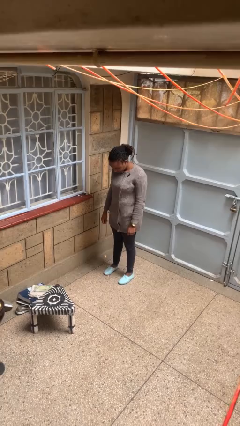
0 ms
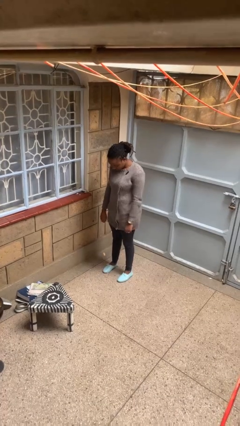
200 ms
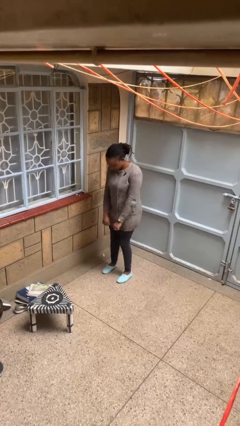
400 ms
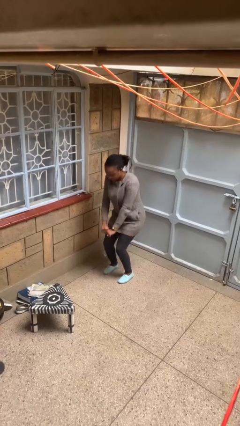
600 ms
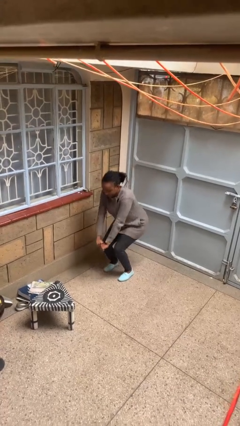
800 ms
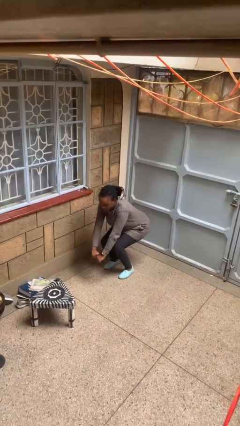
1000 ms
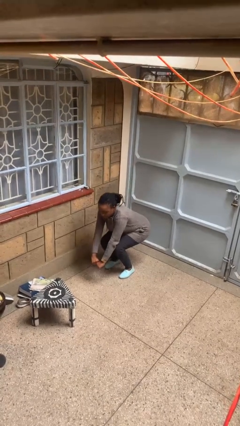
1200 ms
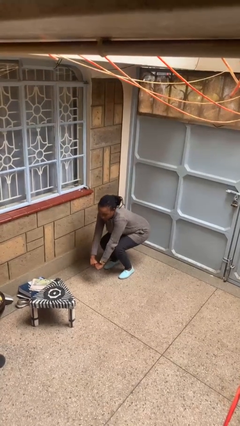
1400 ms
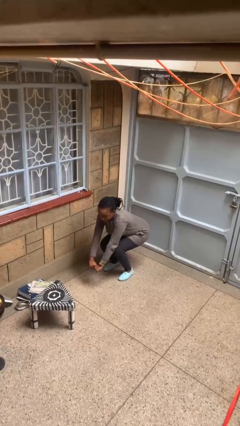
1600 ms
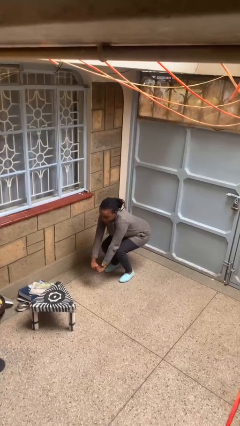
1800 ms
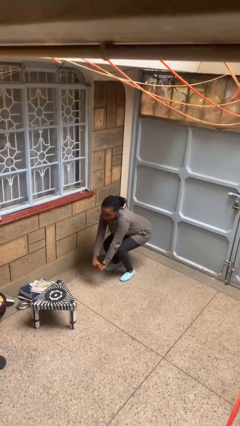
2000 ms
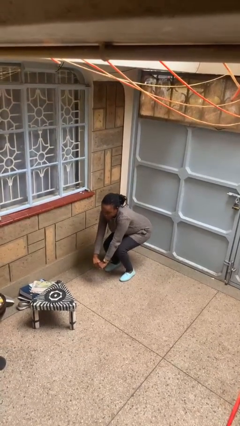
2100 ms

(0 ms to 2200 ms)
person squats

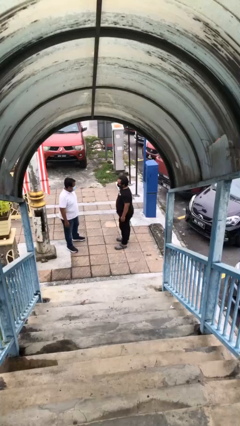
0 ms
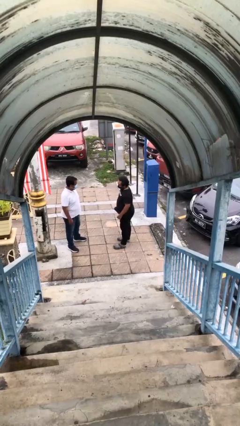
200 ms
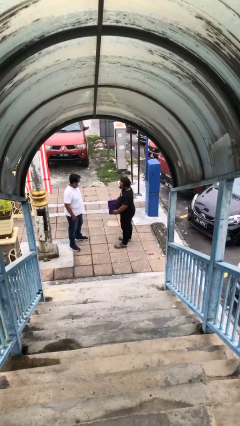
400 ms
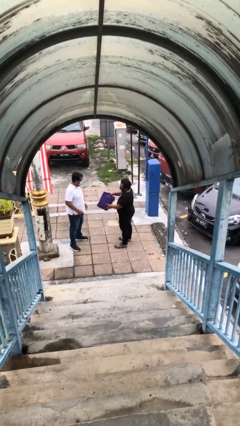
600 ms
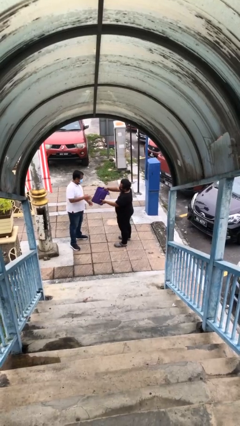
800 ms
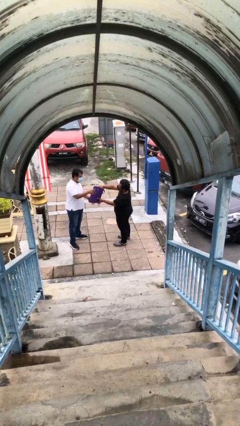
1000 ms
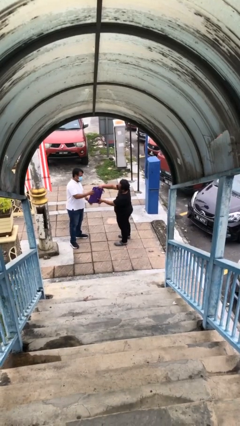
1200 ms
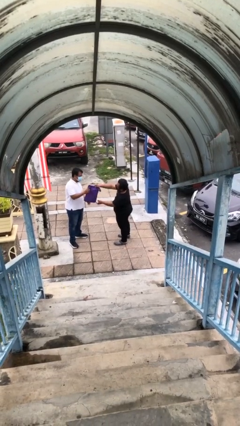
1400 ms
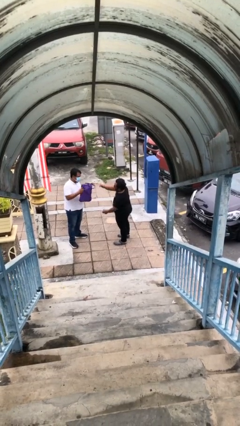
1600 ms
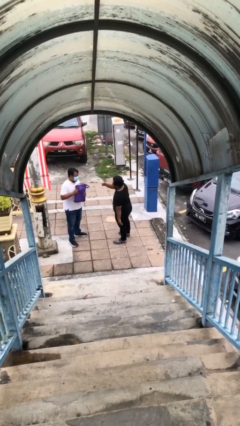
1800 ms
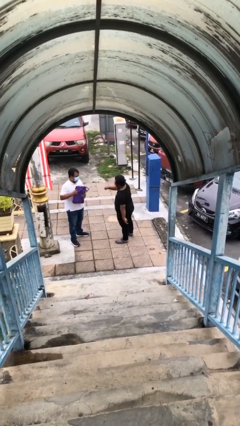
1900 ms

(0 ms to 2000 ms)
person transfers object to person

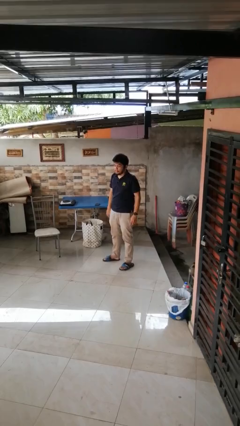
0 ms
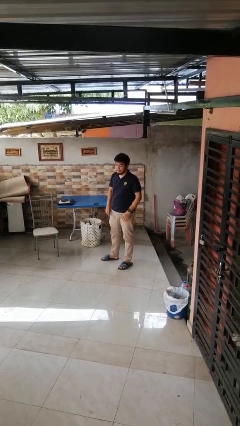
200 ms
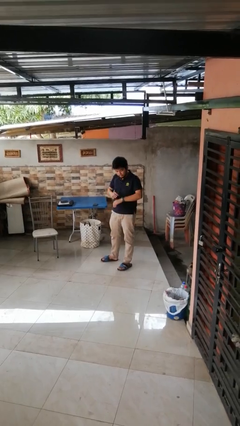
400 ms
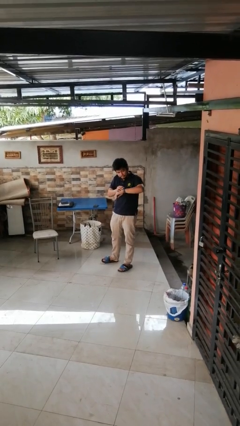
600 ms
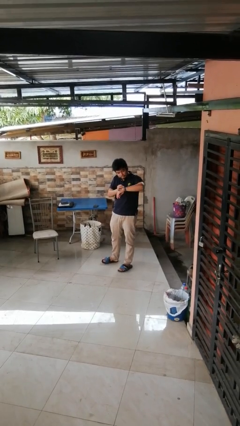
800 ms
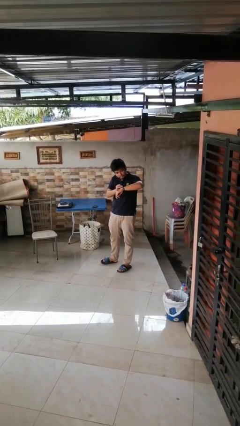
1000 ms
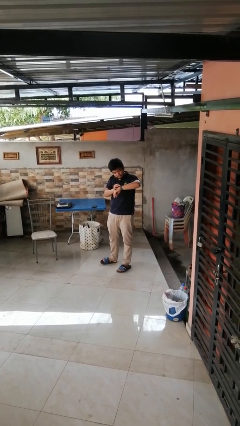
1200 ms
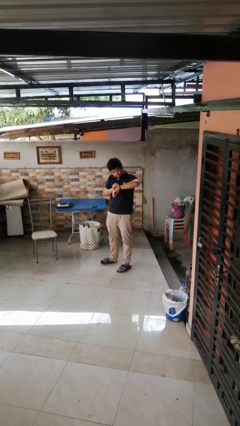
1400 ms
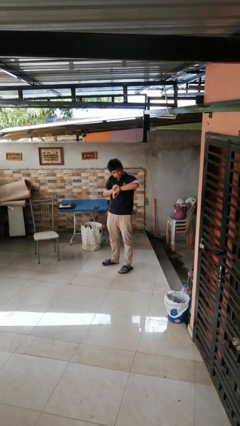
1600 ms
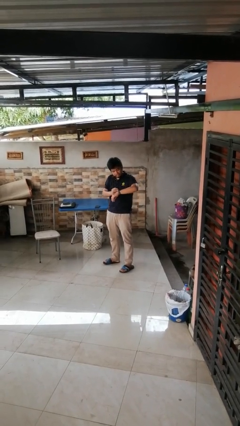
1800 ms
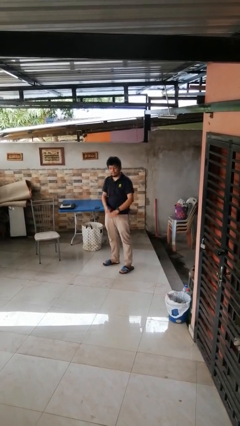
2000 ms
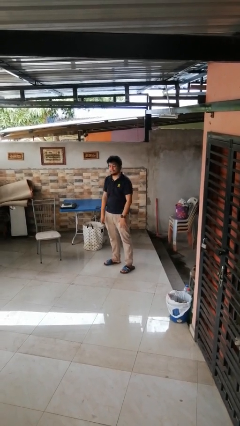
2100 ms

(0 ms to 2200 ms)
person looks at wristwatch

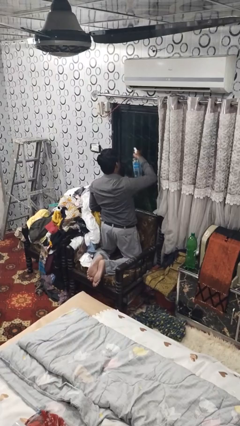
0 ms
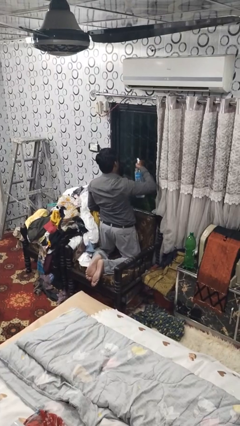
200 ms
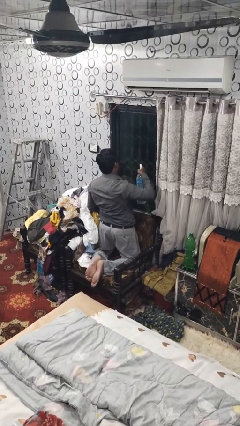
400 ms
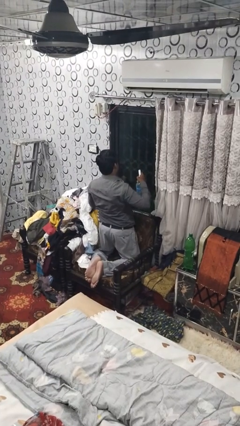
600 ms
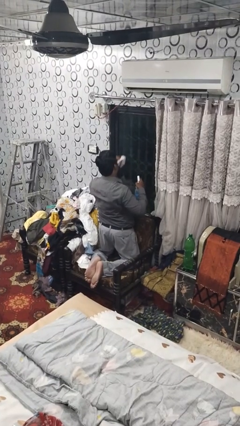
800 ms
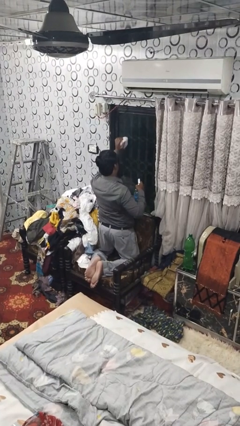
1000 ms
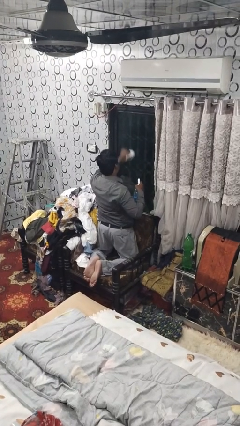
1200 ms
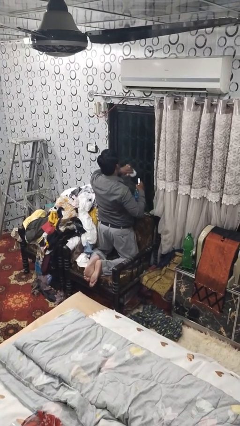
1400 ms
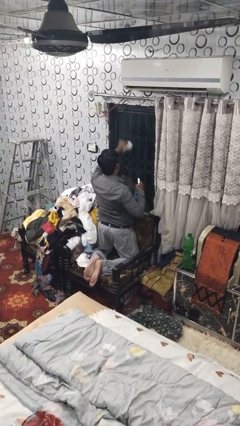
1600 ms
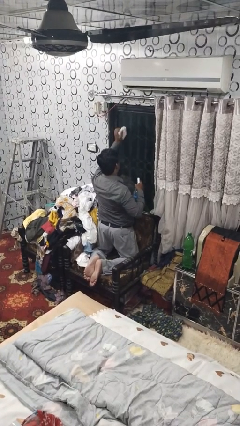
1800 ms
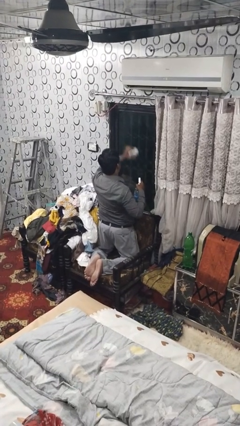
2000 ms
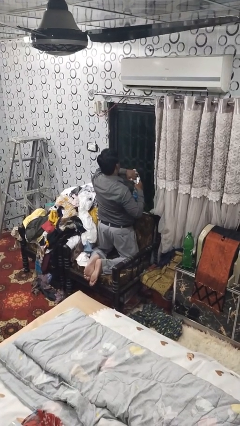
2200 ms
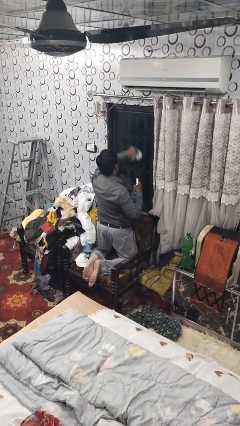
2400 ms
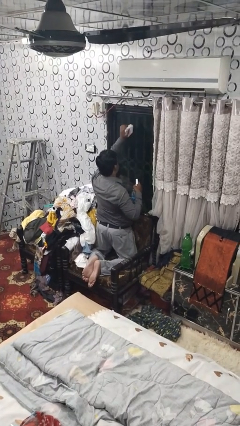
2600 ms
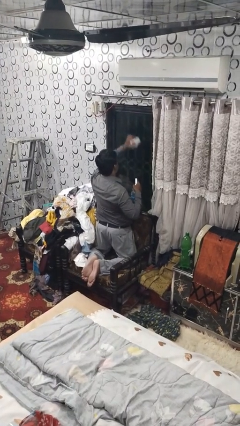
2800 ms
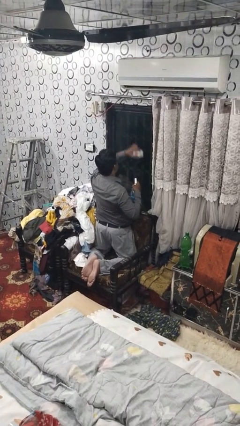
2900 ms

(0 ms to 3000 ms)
person washes window

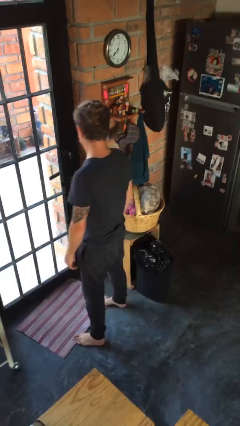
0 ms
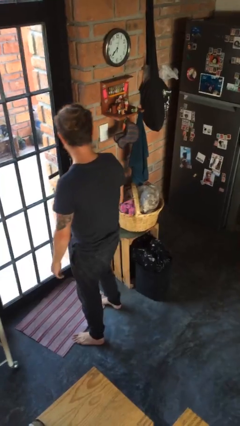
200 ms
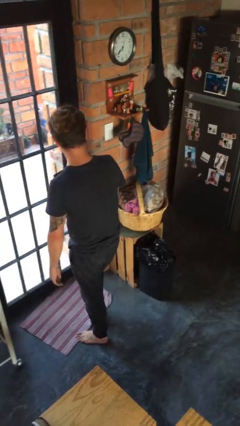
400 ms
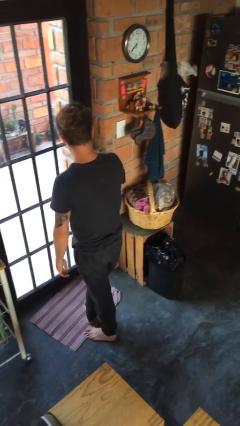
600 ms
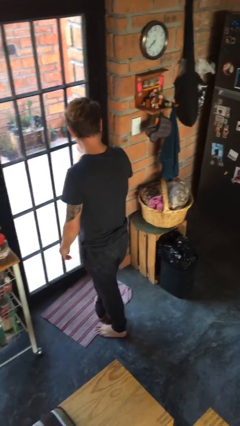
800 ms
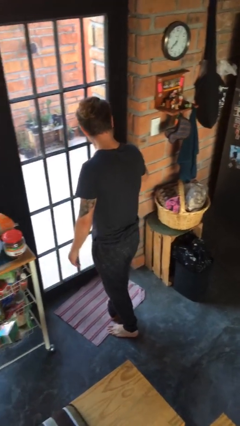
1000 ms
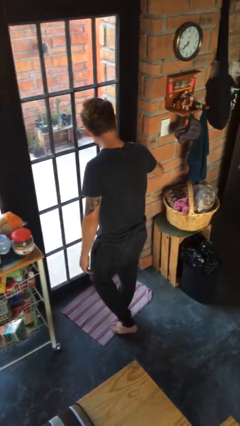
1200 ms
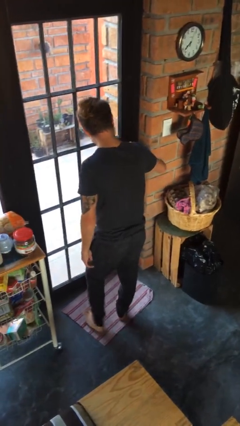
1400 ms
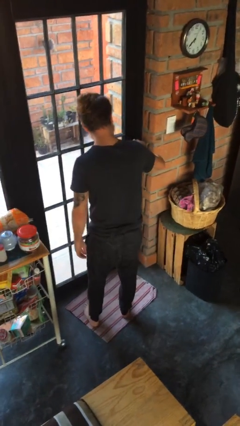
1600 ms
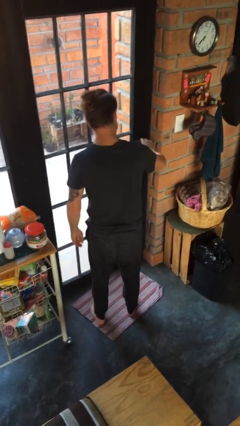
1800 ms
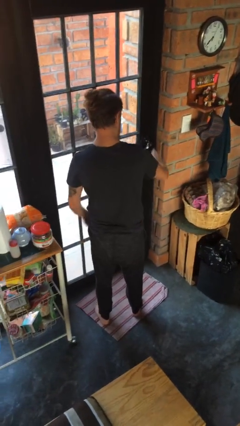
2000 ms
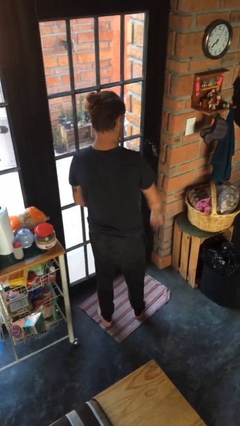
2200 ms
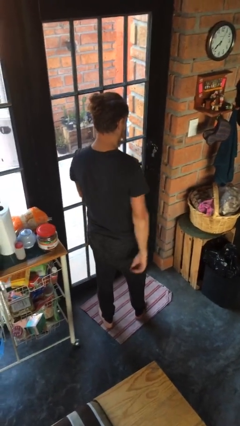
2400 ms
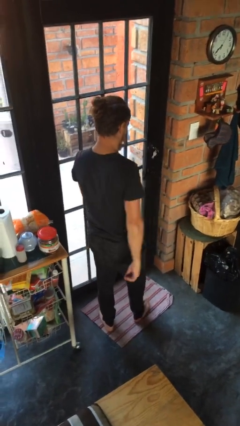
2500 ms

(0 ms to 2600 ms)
person unlocks door with keys

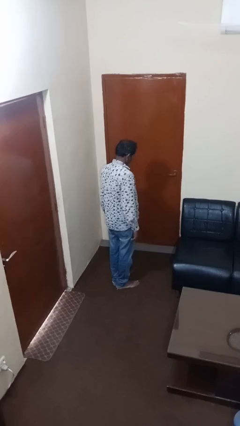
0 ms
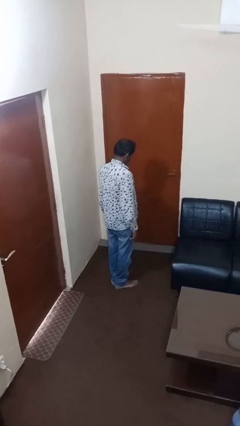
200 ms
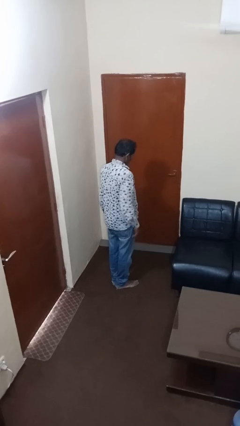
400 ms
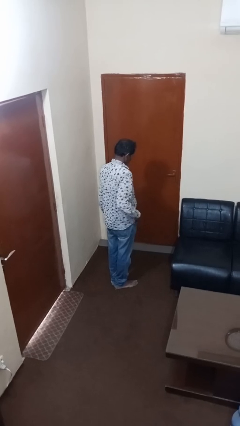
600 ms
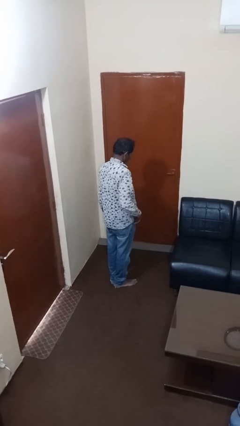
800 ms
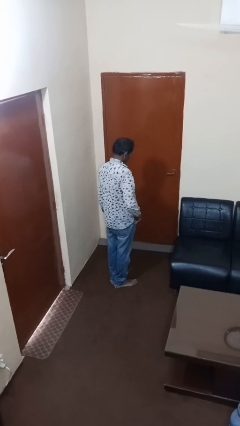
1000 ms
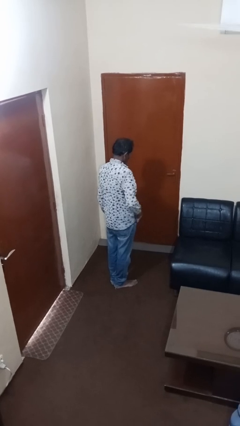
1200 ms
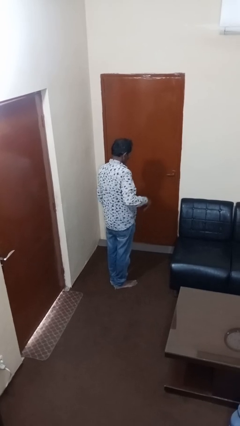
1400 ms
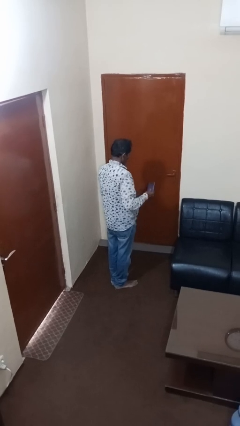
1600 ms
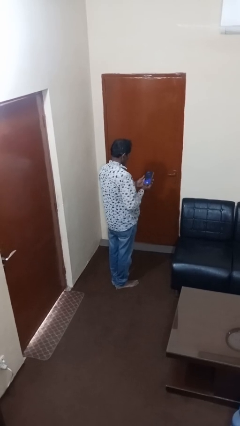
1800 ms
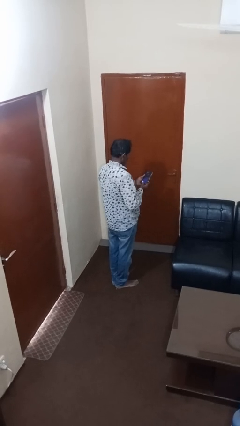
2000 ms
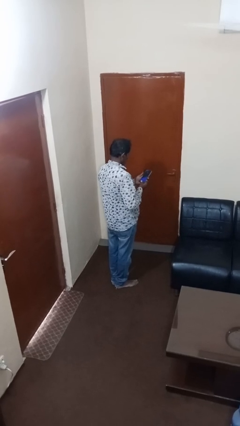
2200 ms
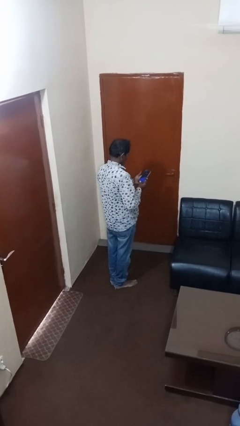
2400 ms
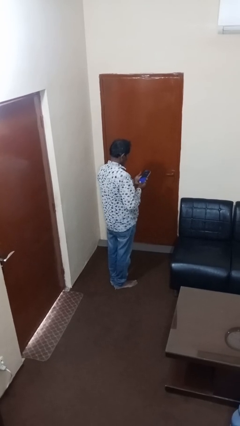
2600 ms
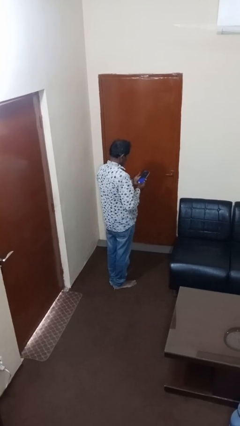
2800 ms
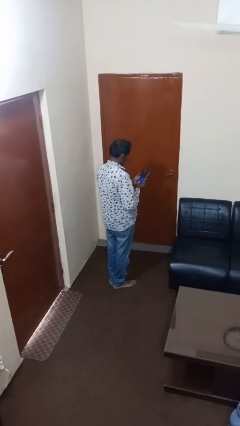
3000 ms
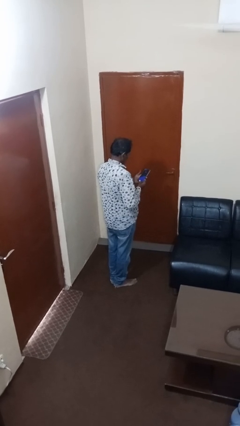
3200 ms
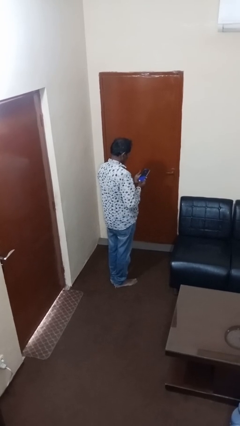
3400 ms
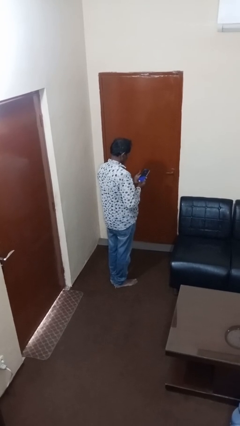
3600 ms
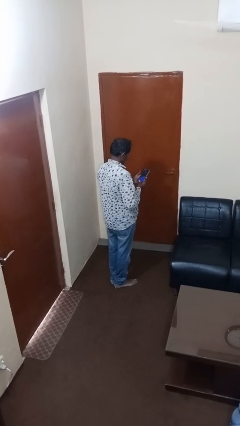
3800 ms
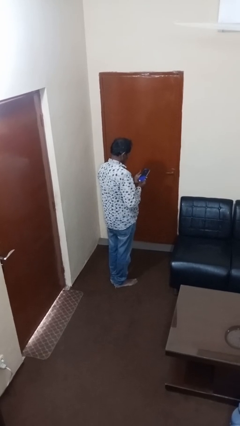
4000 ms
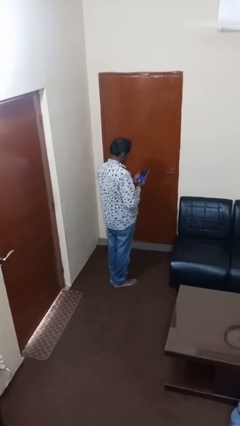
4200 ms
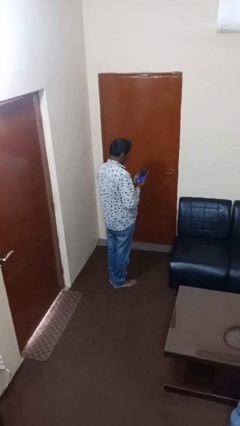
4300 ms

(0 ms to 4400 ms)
person takes phone from pocket

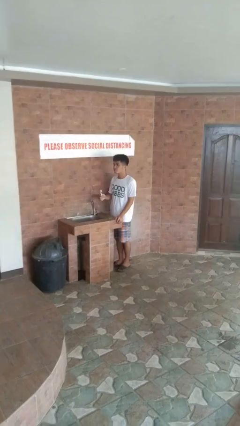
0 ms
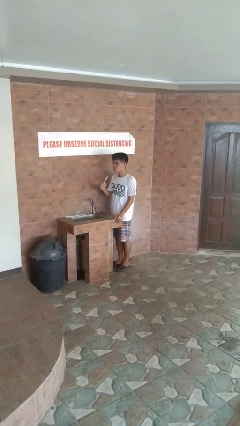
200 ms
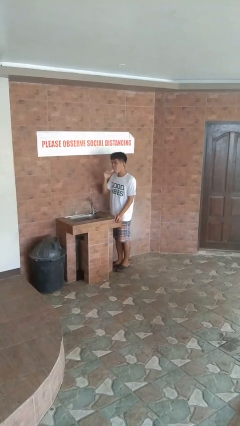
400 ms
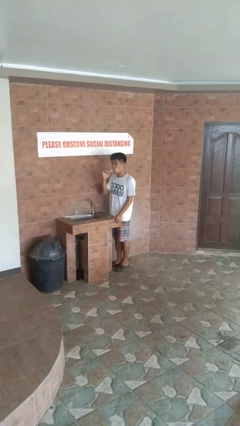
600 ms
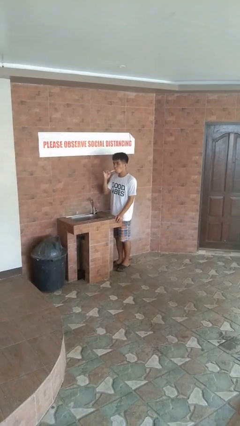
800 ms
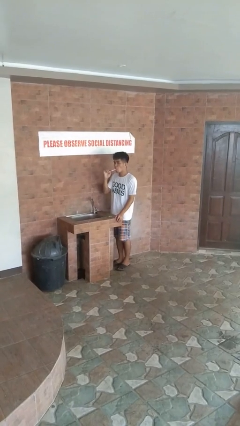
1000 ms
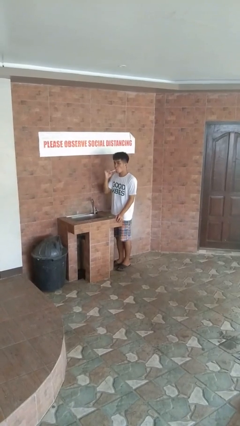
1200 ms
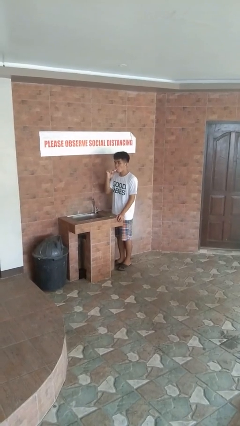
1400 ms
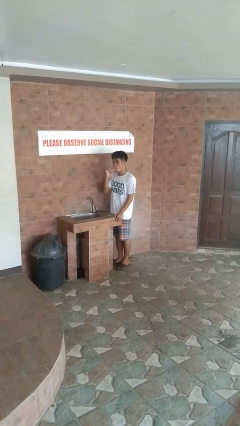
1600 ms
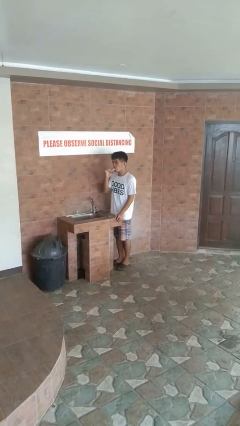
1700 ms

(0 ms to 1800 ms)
person brushes teeth
